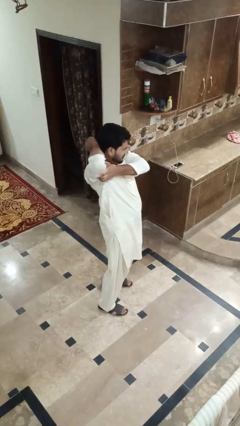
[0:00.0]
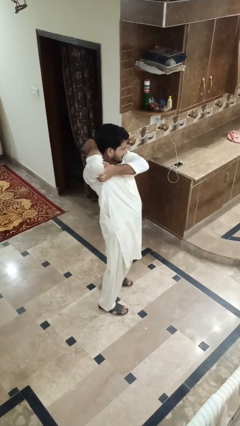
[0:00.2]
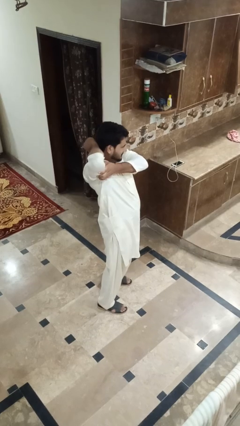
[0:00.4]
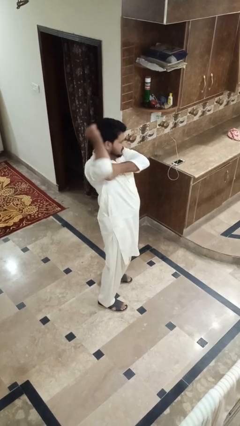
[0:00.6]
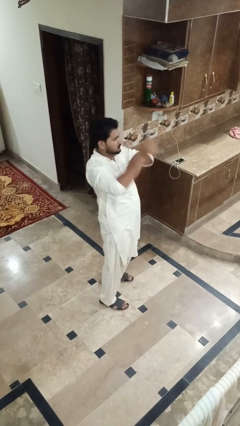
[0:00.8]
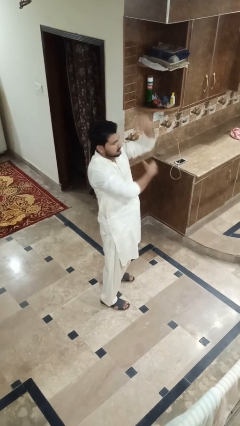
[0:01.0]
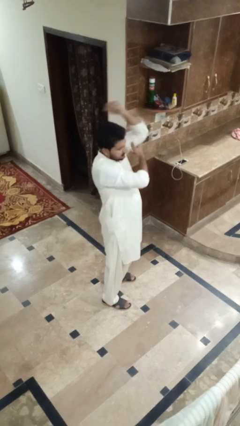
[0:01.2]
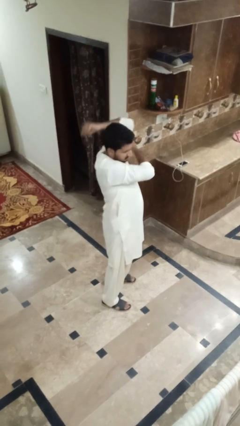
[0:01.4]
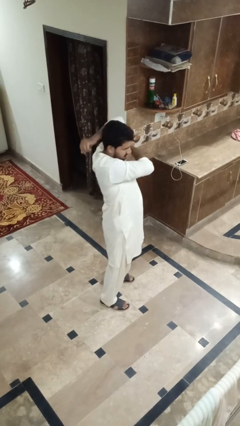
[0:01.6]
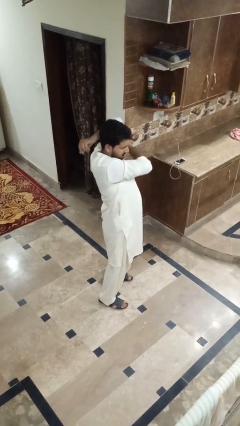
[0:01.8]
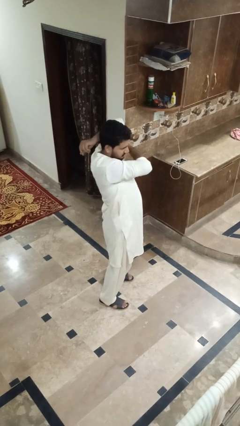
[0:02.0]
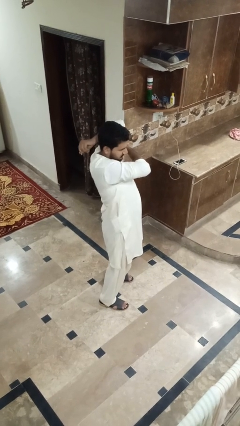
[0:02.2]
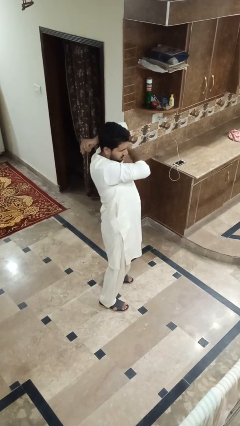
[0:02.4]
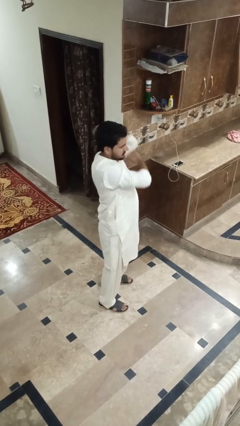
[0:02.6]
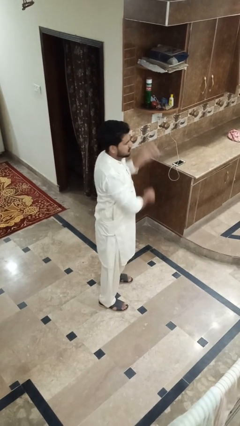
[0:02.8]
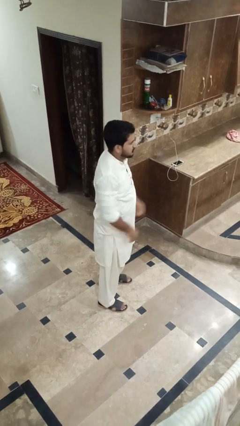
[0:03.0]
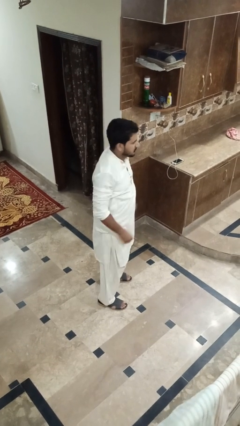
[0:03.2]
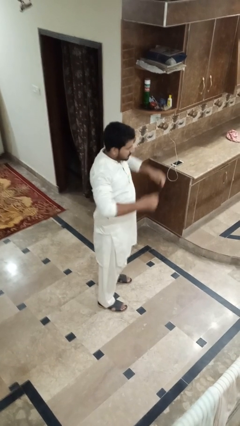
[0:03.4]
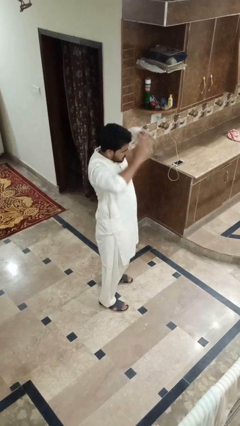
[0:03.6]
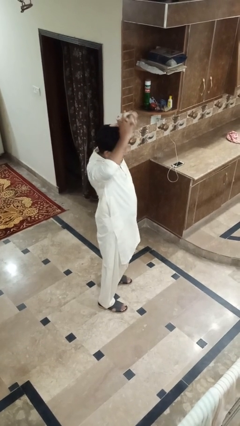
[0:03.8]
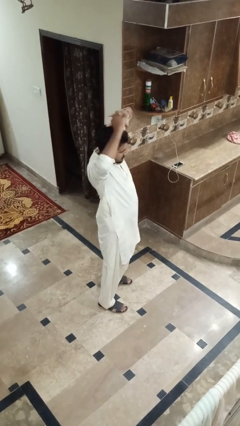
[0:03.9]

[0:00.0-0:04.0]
person stretches arms to side

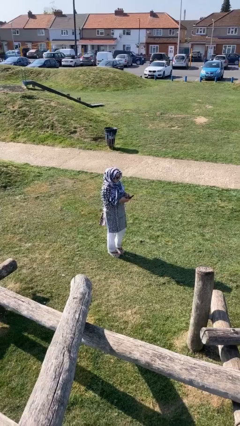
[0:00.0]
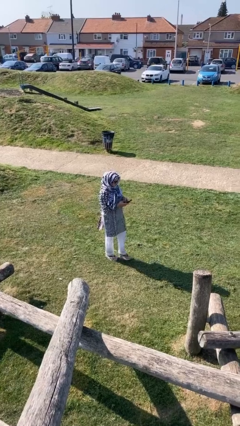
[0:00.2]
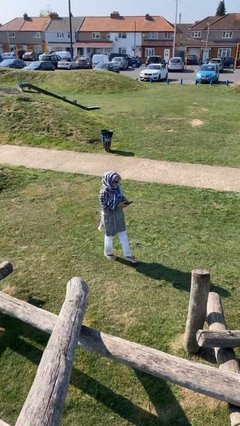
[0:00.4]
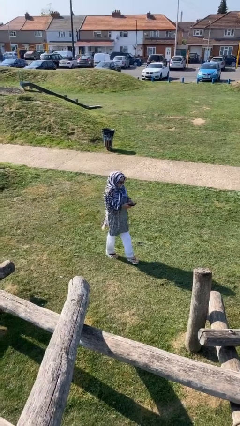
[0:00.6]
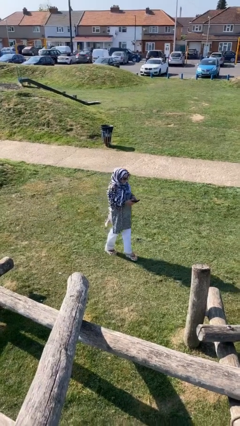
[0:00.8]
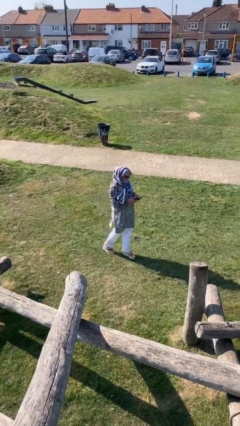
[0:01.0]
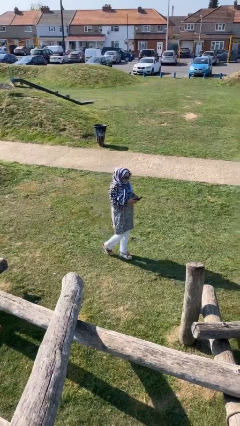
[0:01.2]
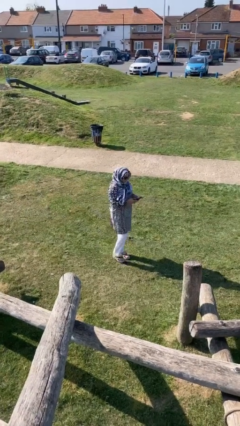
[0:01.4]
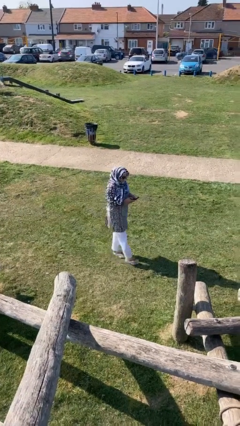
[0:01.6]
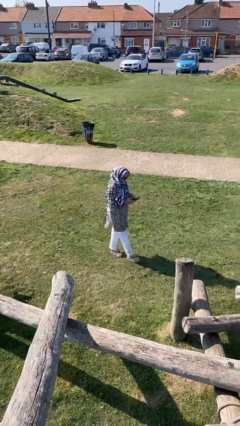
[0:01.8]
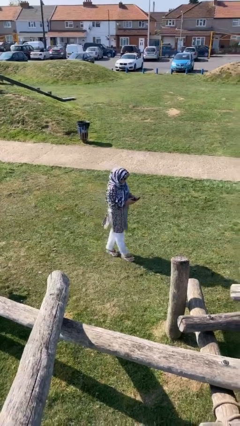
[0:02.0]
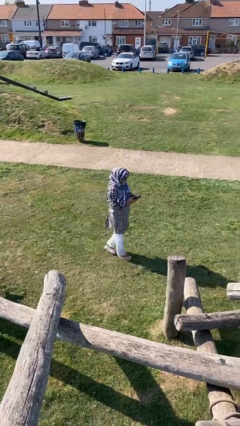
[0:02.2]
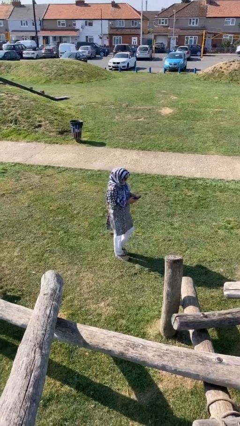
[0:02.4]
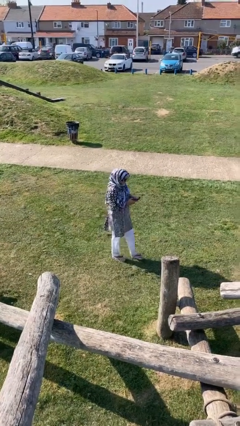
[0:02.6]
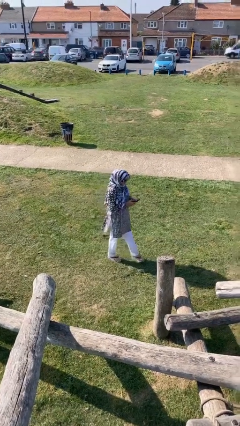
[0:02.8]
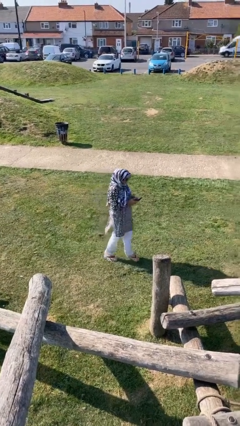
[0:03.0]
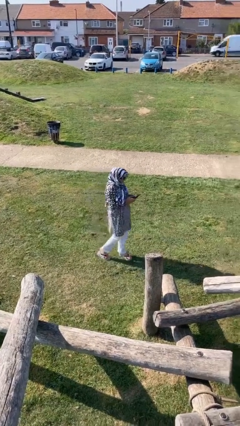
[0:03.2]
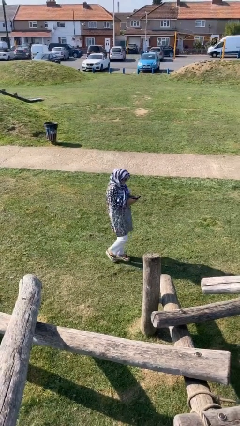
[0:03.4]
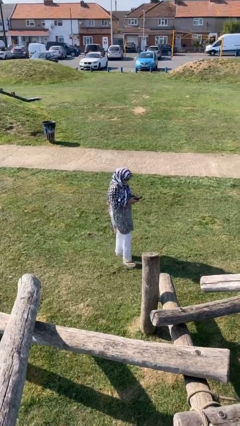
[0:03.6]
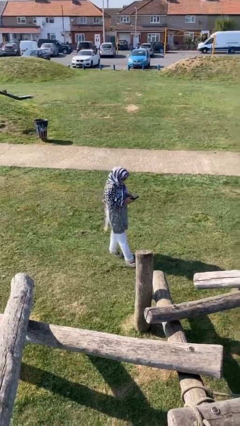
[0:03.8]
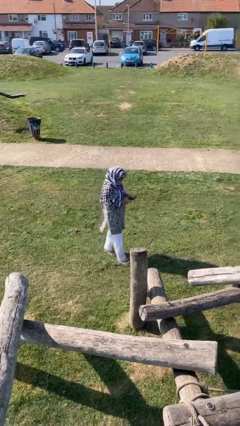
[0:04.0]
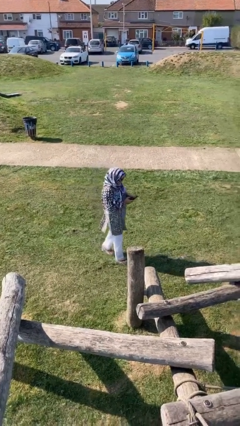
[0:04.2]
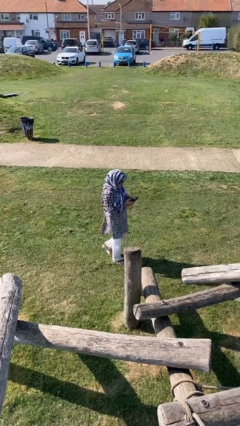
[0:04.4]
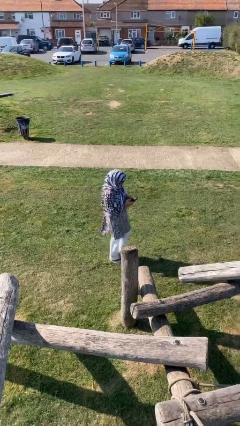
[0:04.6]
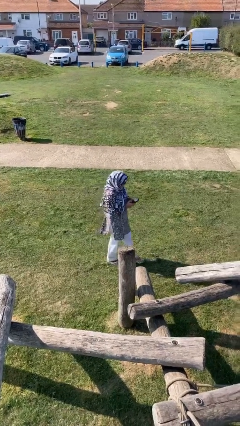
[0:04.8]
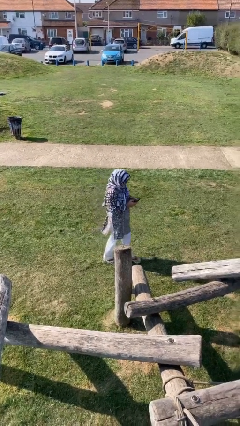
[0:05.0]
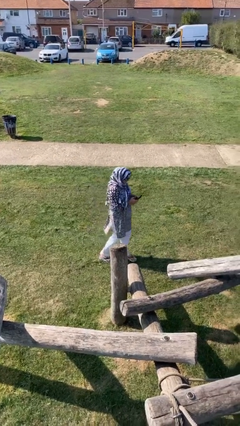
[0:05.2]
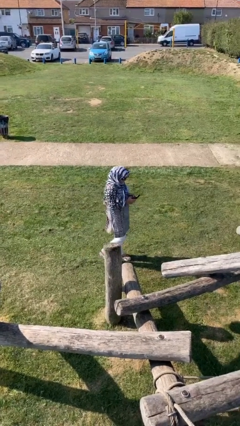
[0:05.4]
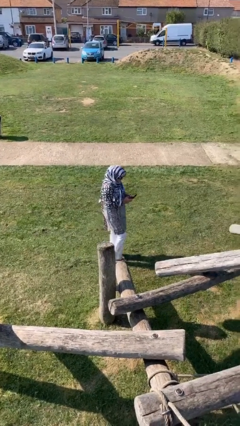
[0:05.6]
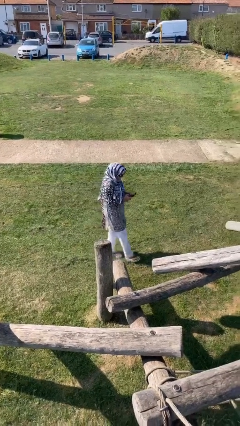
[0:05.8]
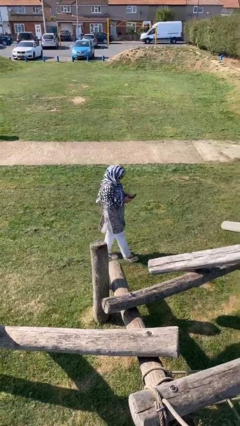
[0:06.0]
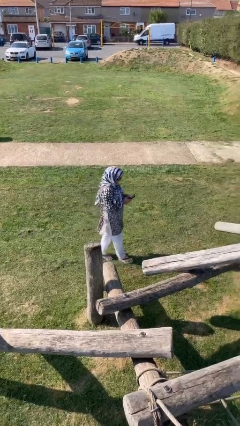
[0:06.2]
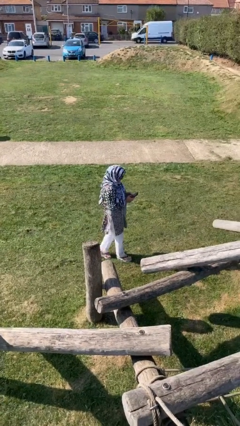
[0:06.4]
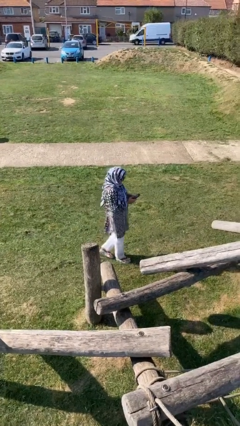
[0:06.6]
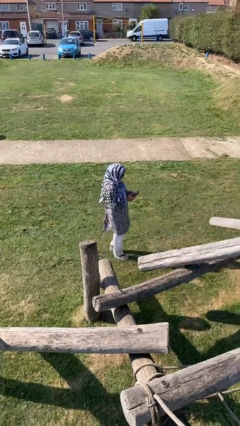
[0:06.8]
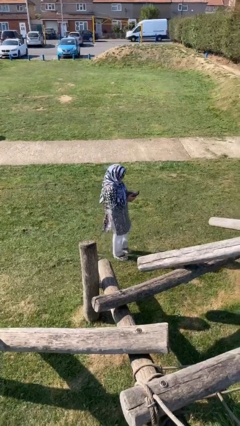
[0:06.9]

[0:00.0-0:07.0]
person texts on phone

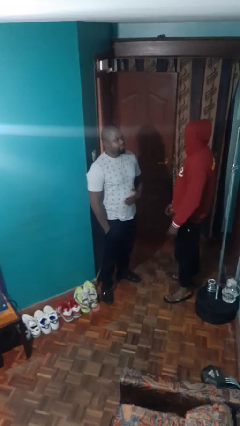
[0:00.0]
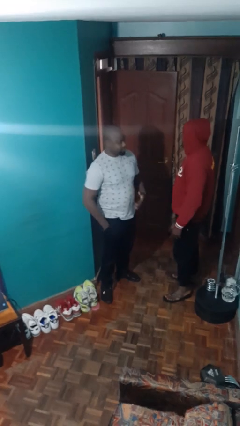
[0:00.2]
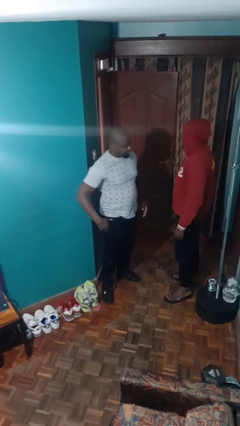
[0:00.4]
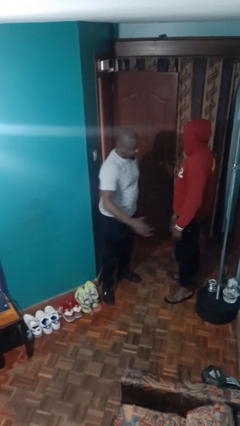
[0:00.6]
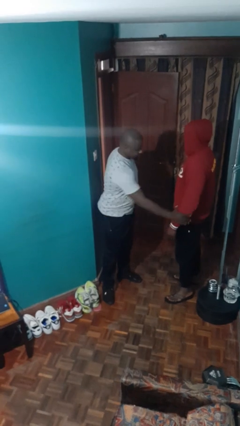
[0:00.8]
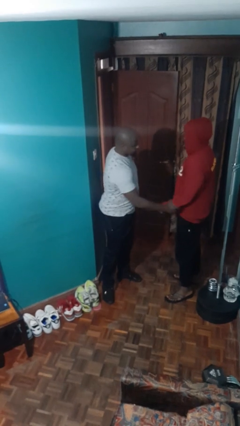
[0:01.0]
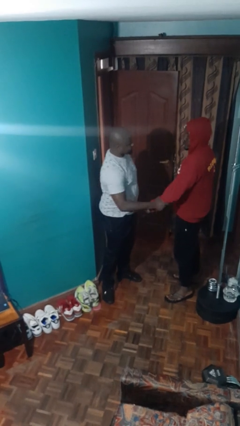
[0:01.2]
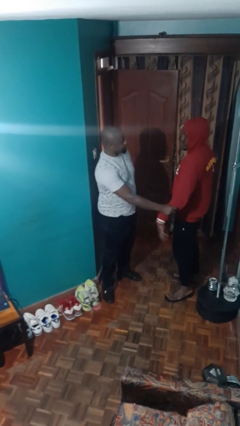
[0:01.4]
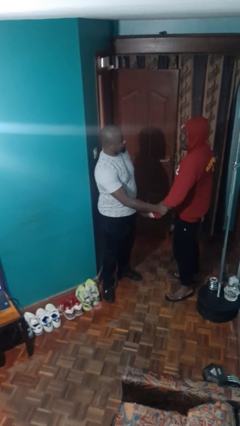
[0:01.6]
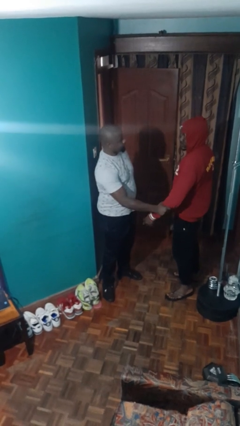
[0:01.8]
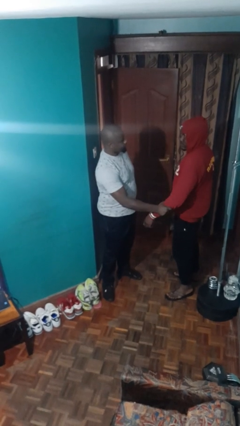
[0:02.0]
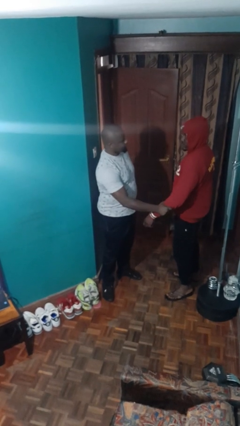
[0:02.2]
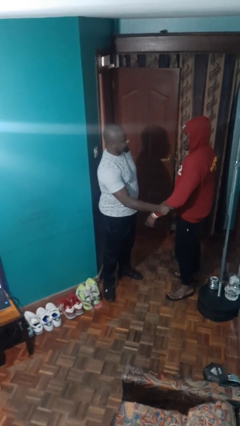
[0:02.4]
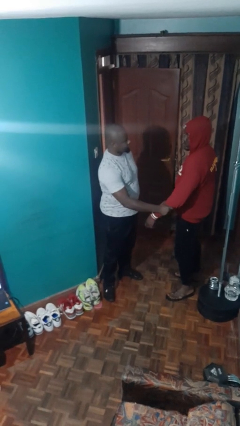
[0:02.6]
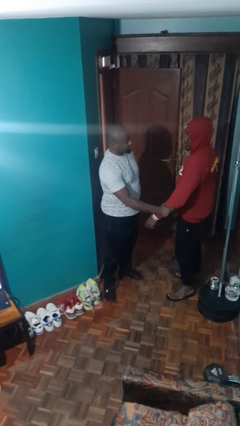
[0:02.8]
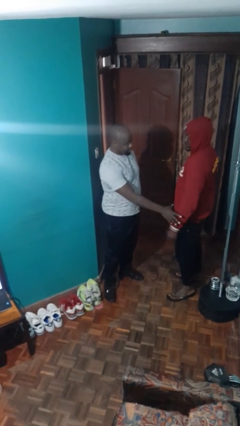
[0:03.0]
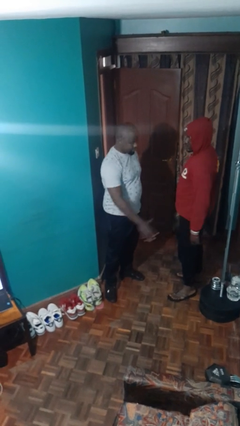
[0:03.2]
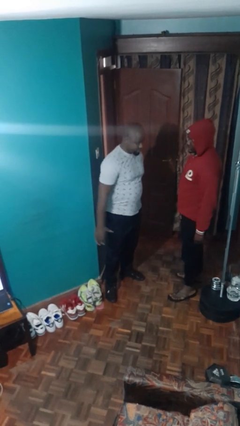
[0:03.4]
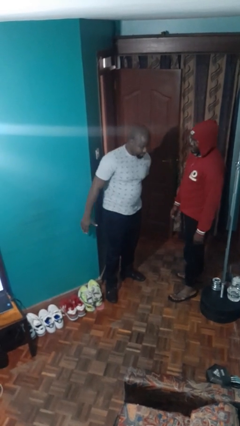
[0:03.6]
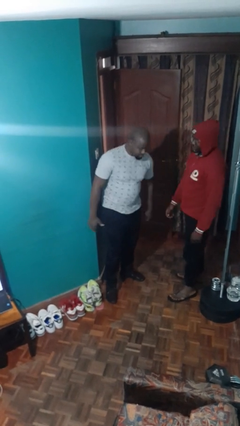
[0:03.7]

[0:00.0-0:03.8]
person grabs person by forearm

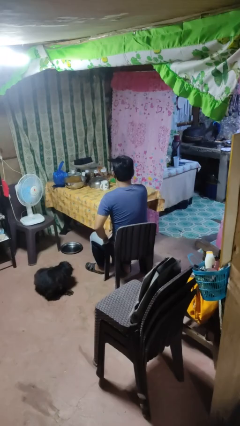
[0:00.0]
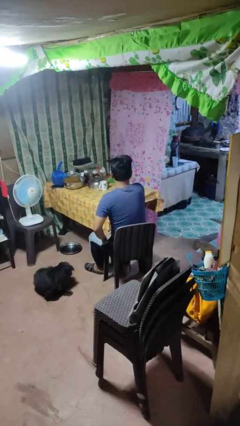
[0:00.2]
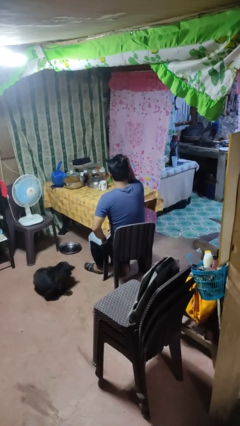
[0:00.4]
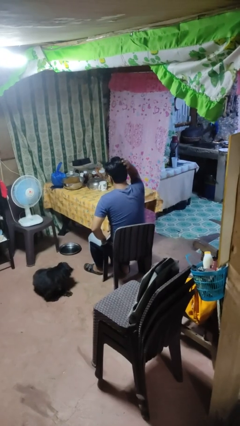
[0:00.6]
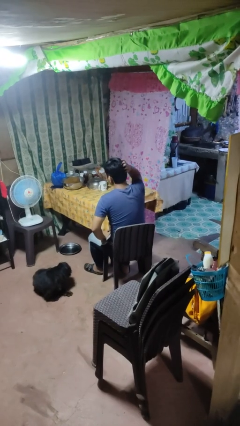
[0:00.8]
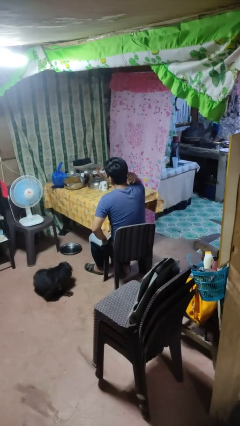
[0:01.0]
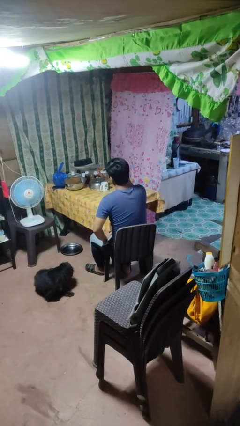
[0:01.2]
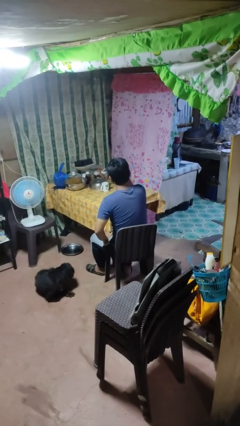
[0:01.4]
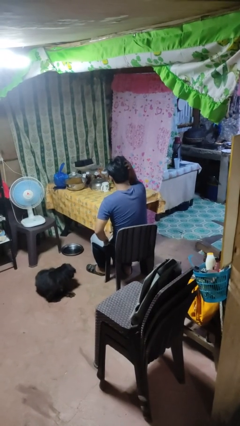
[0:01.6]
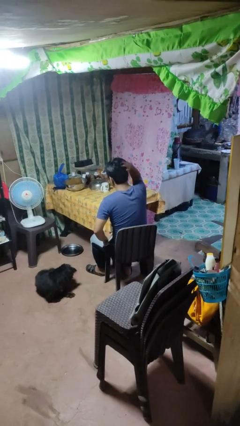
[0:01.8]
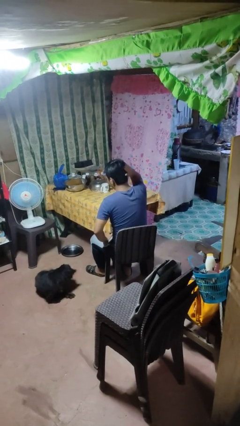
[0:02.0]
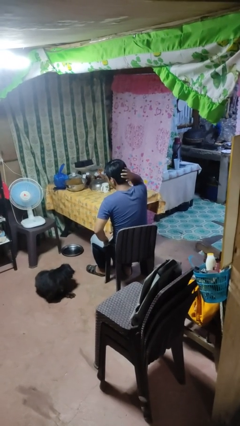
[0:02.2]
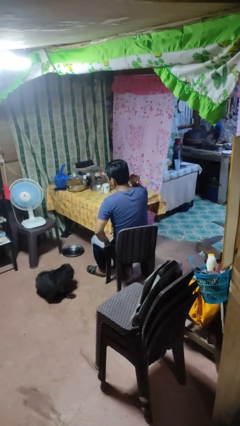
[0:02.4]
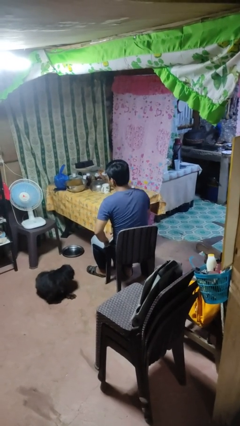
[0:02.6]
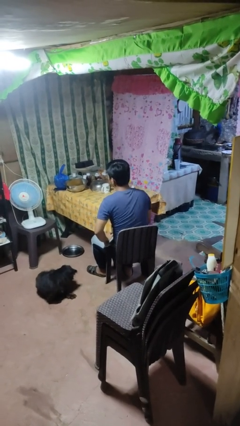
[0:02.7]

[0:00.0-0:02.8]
person strokes hair

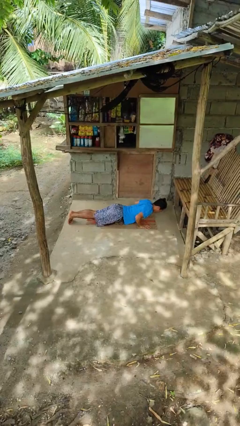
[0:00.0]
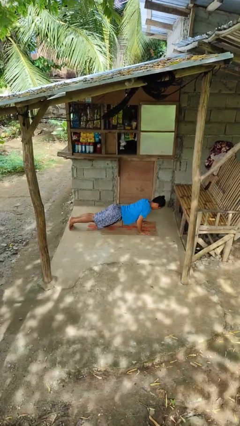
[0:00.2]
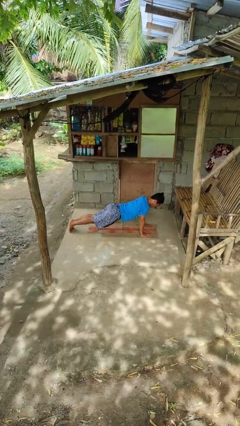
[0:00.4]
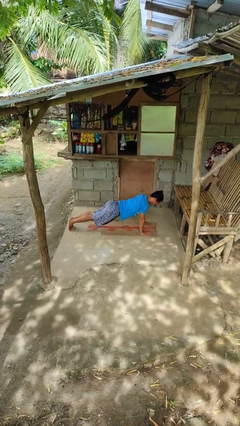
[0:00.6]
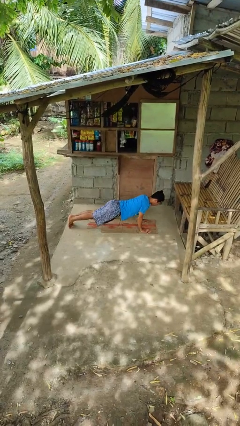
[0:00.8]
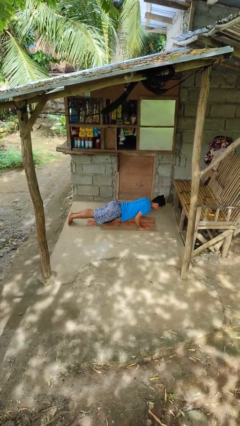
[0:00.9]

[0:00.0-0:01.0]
person exercises with pushup
